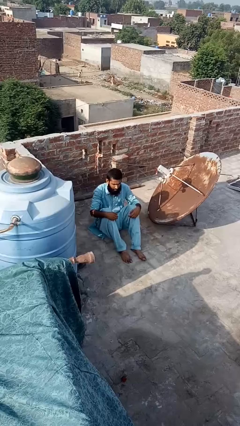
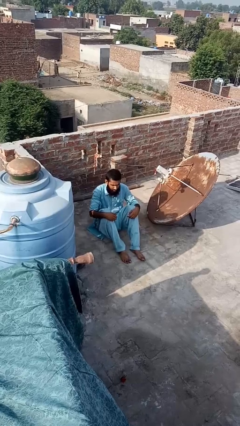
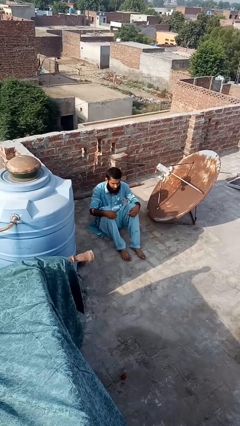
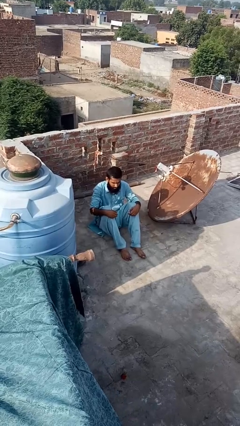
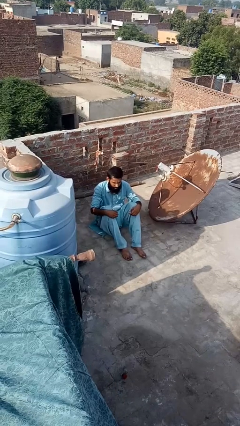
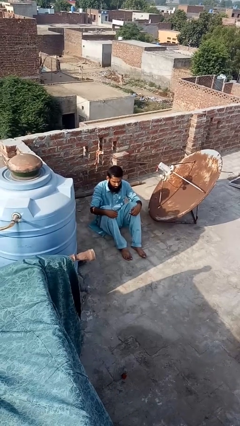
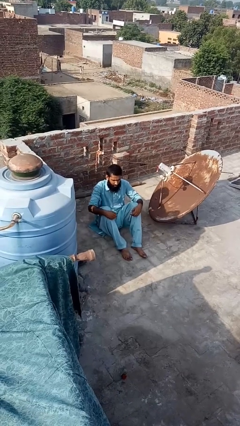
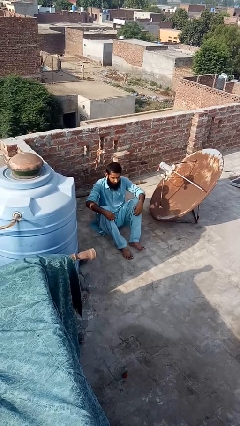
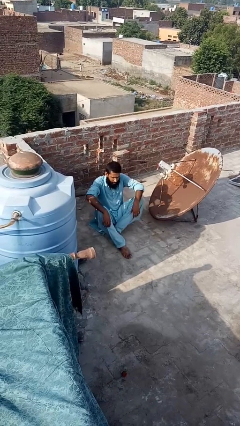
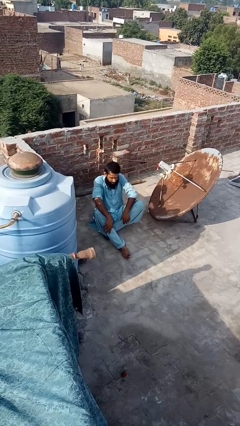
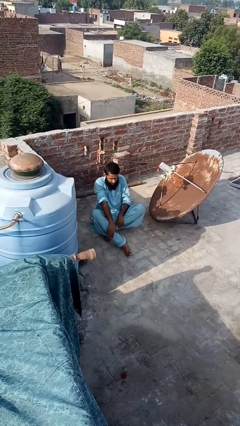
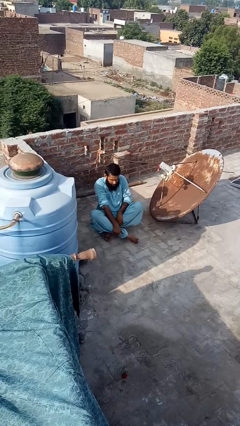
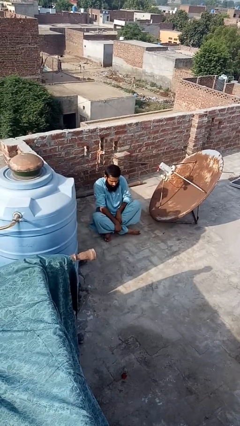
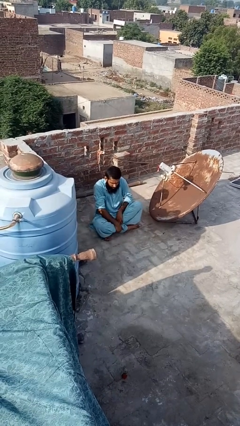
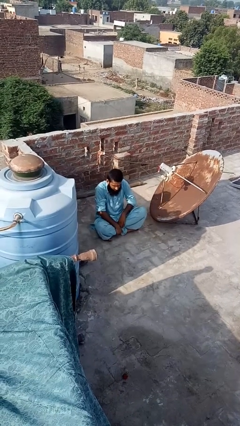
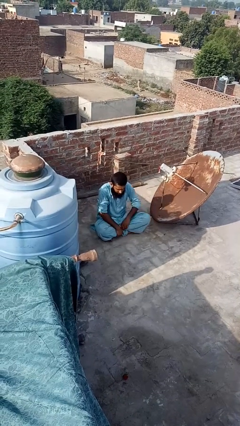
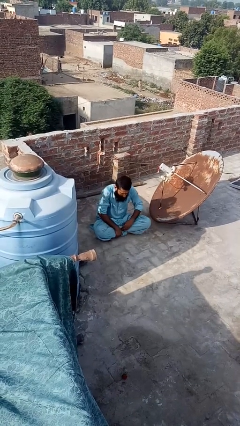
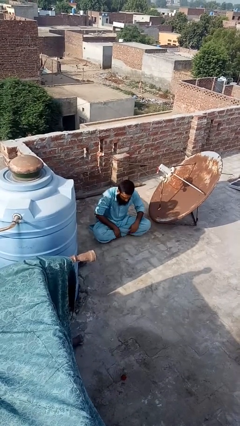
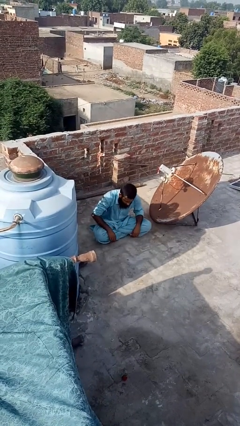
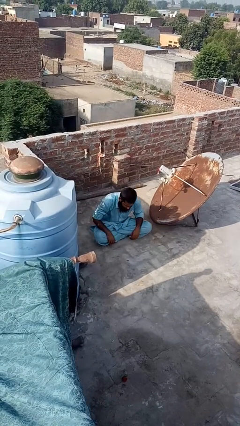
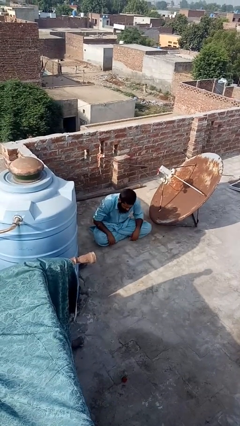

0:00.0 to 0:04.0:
person crosses legs

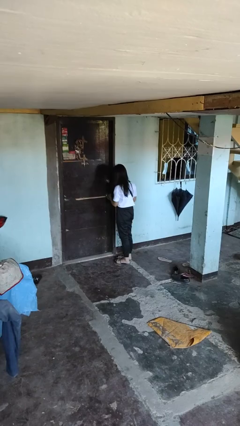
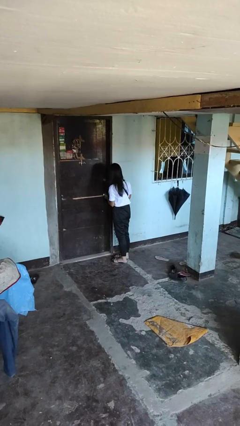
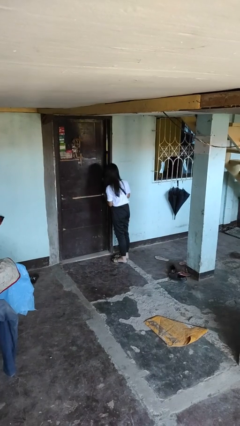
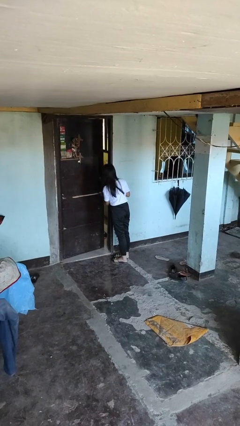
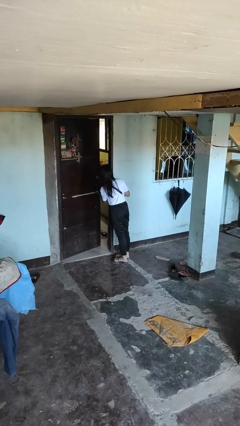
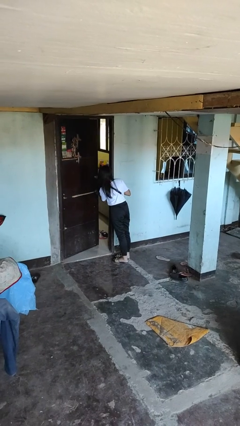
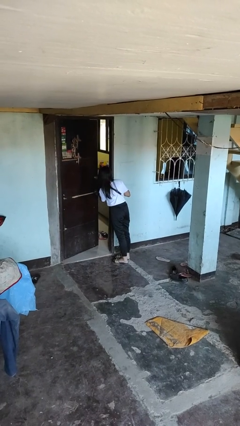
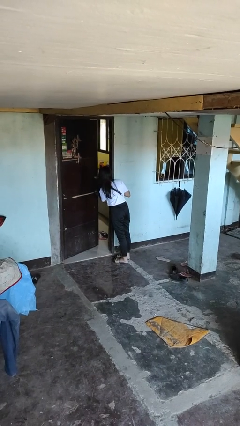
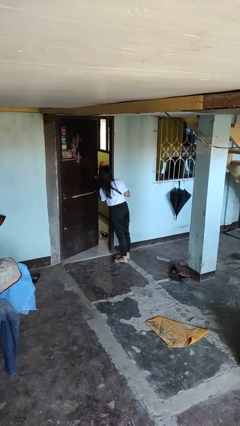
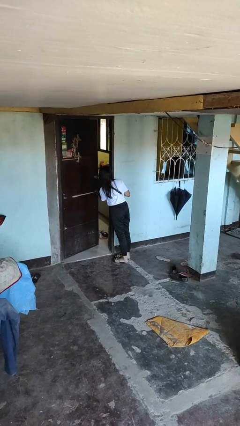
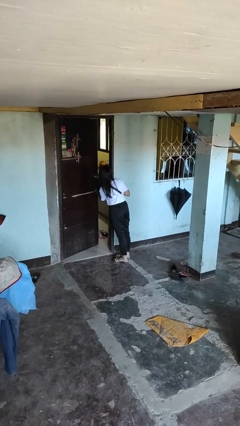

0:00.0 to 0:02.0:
person opens facility door

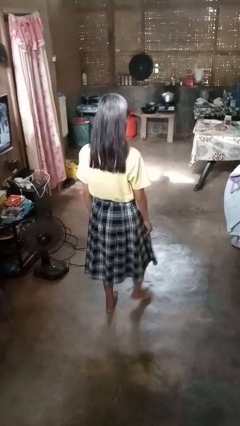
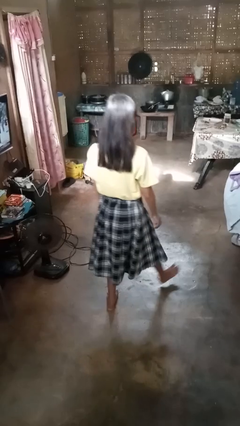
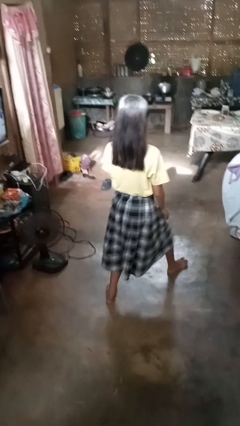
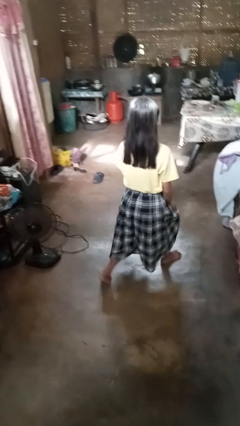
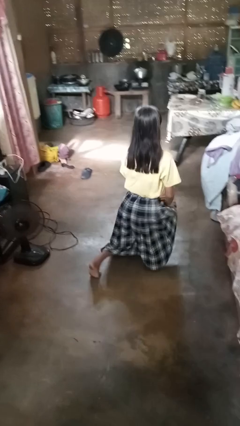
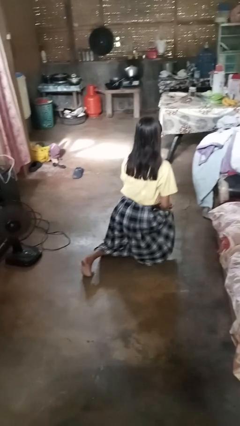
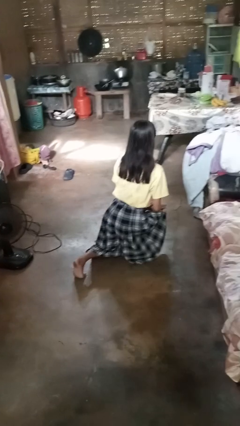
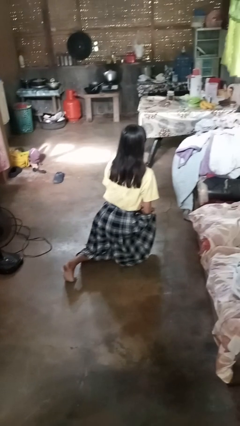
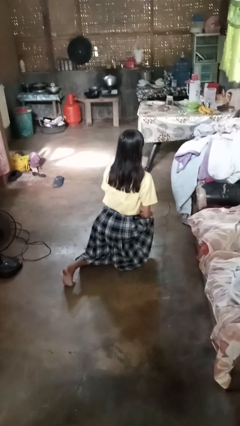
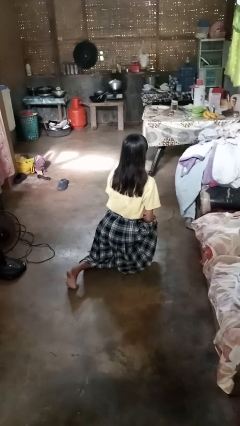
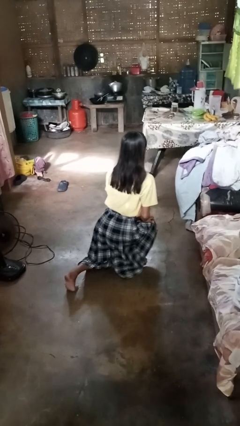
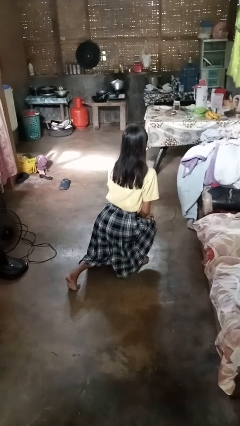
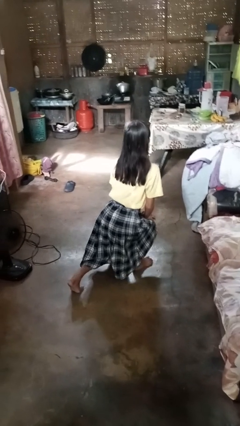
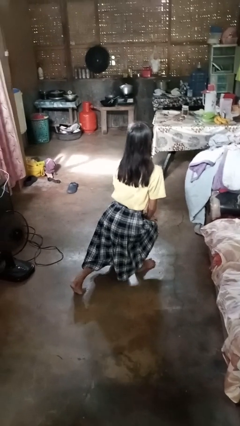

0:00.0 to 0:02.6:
person exercises with lunges

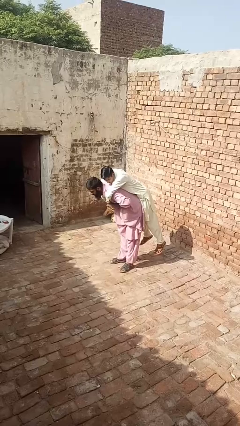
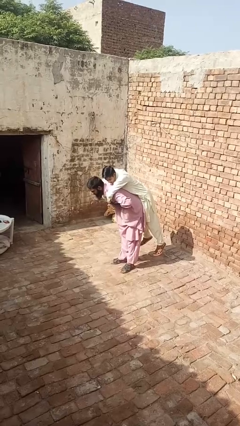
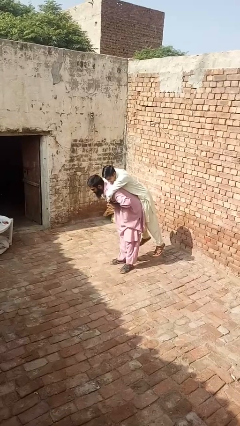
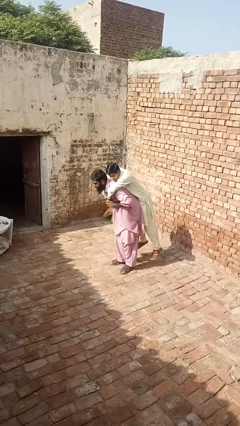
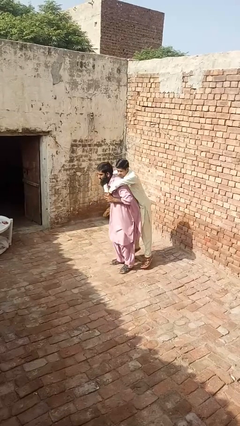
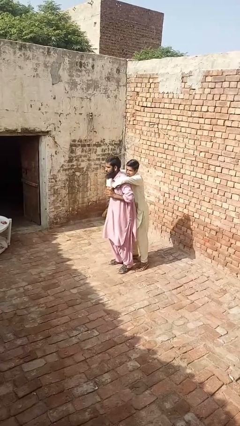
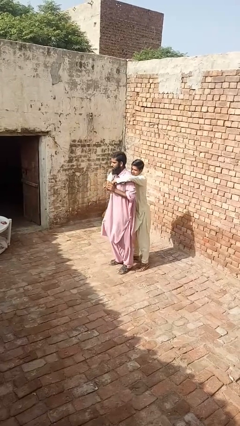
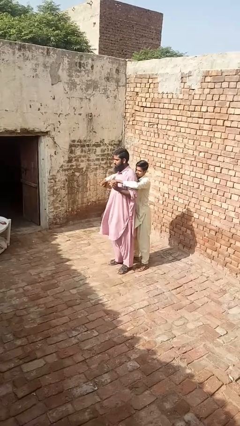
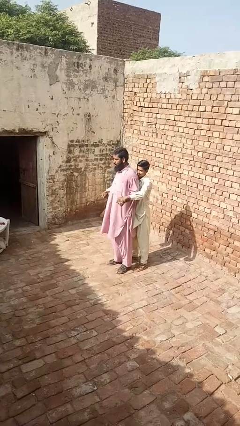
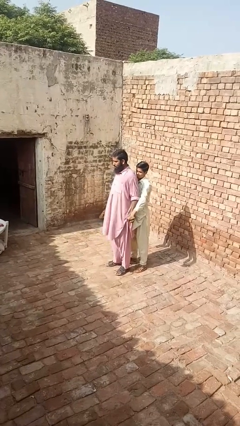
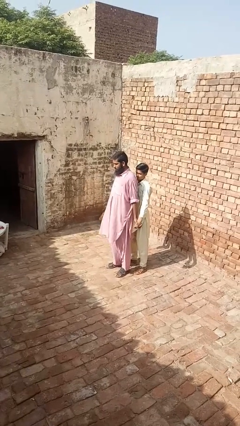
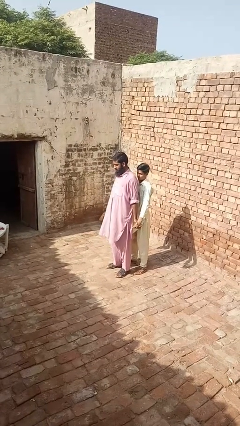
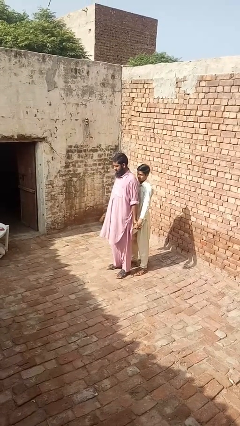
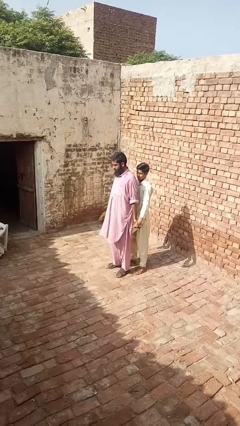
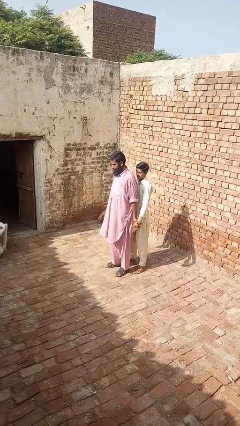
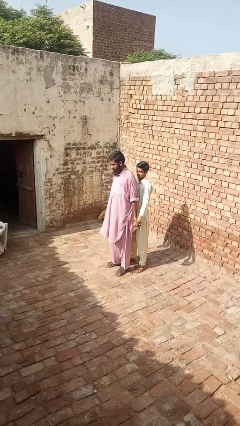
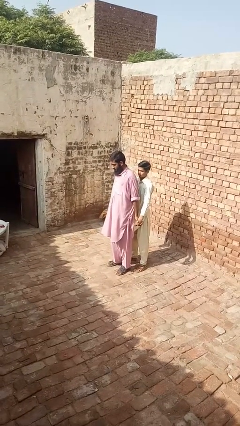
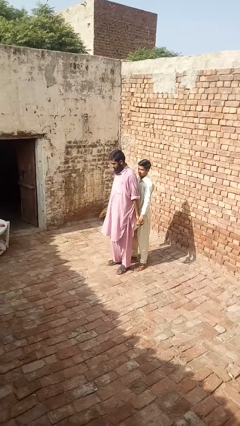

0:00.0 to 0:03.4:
person puts down person

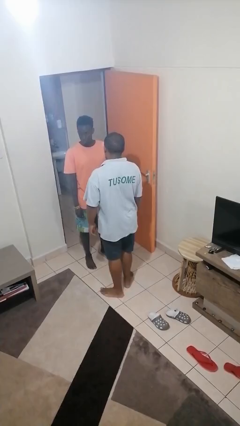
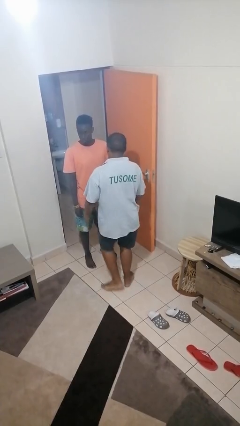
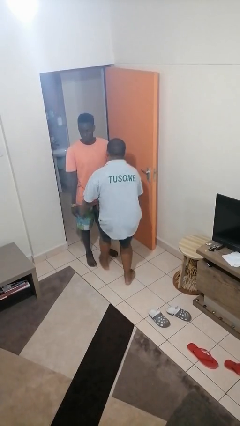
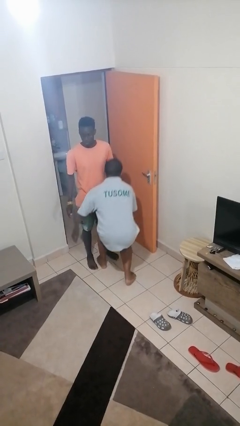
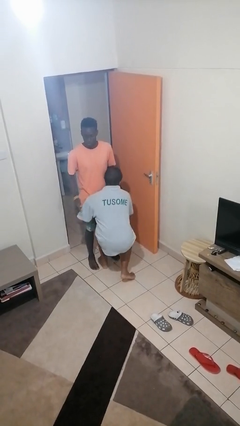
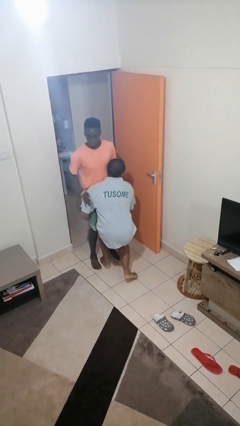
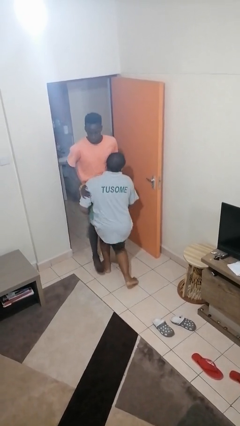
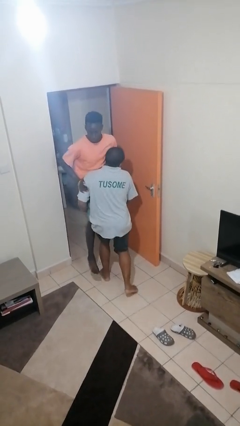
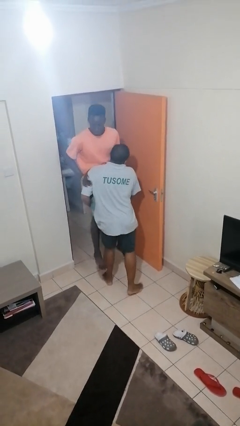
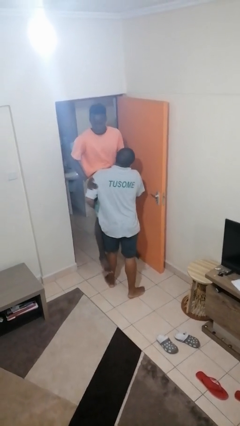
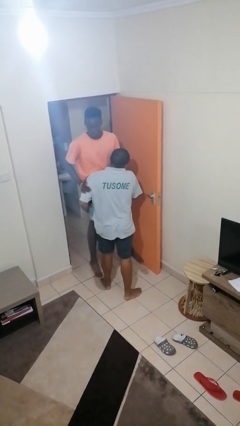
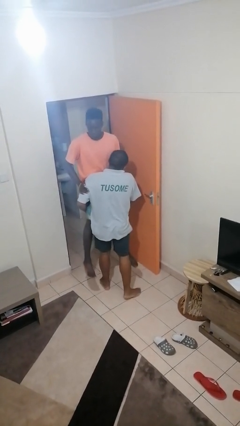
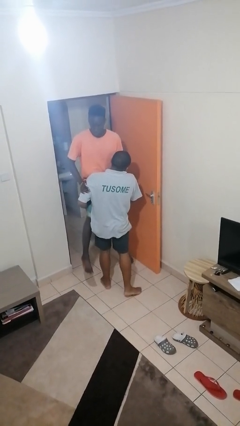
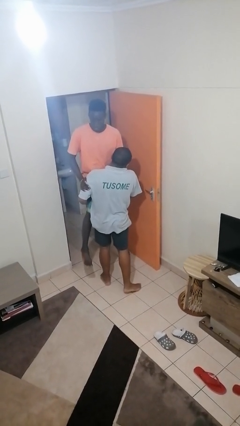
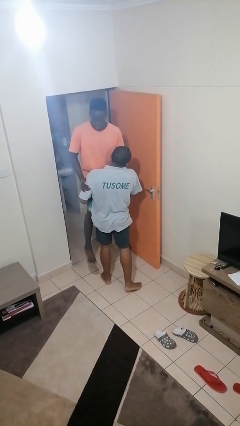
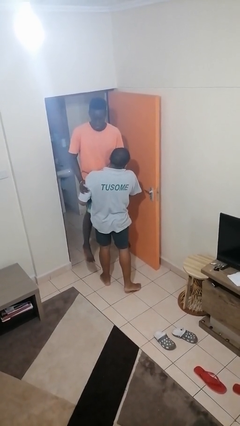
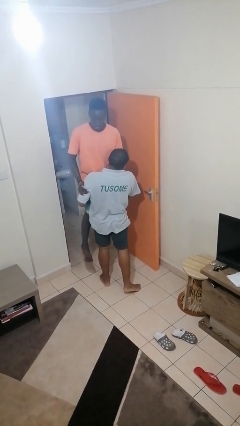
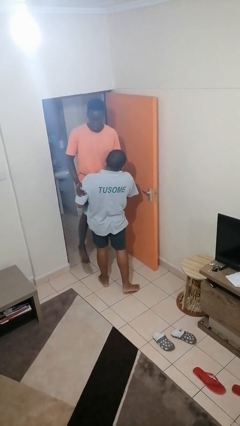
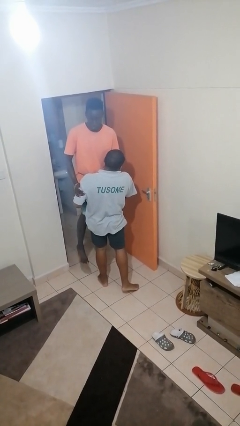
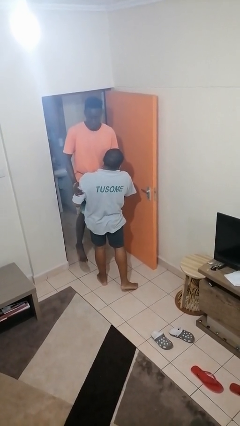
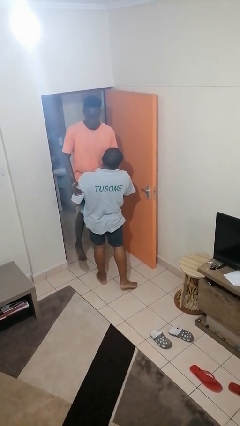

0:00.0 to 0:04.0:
person picks up person

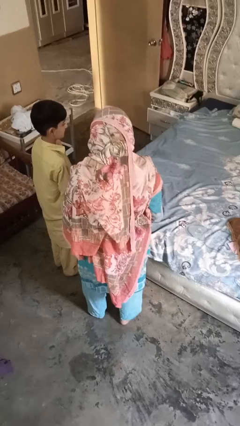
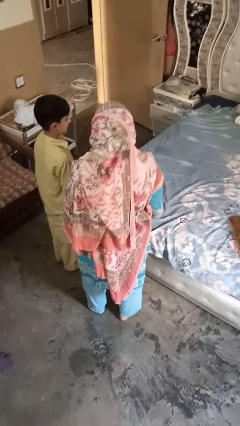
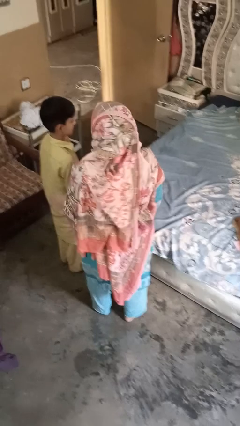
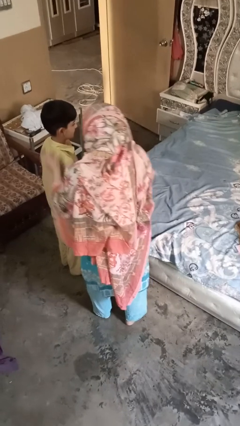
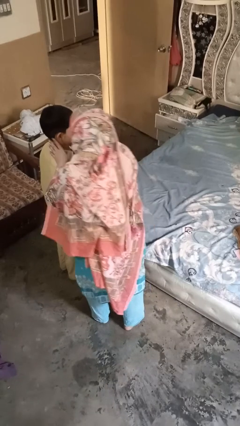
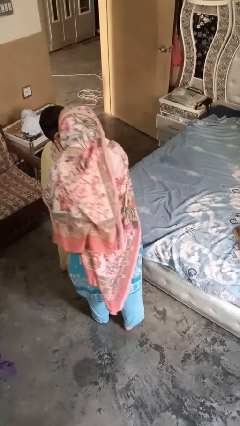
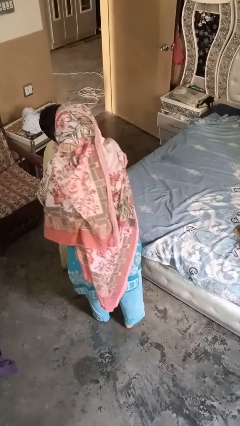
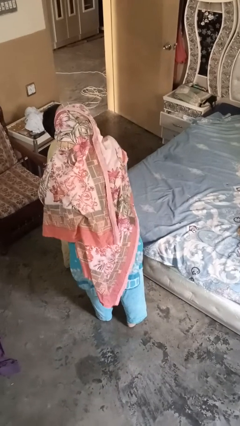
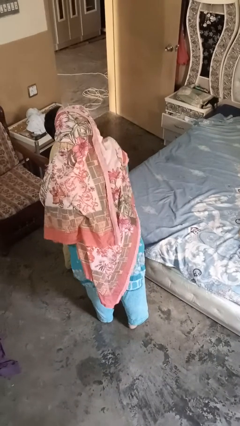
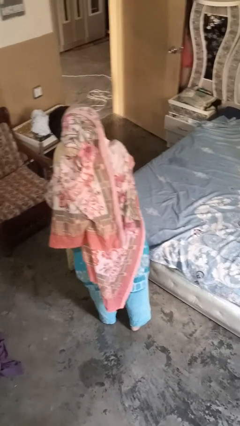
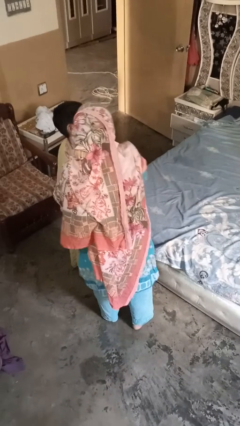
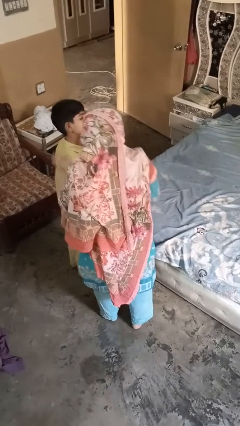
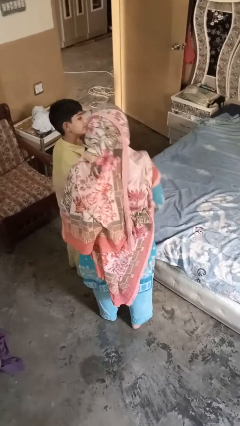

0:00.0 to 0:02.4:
person gestures blow kiss
